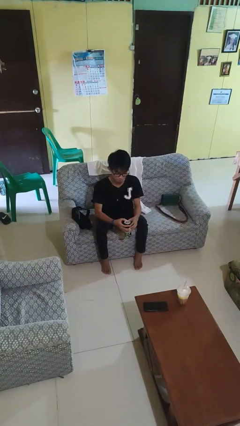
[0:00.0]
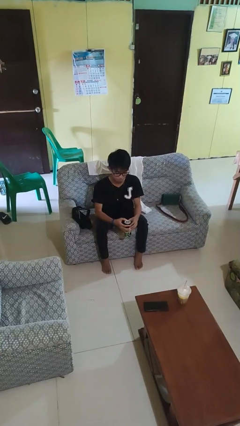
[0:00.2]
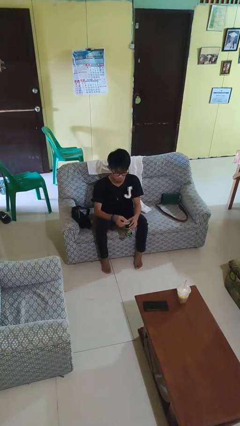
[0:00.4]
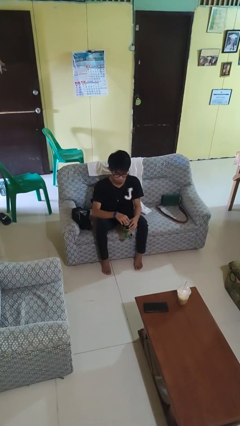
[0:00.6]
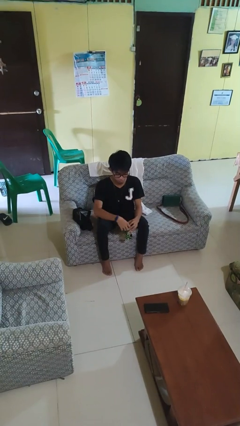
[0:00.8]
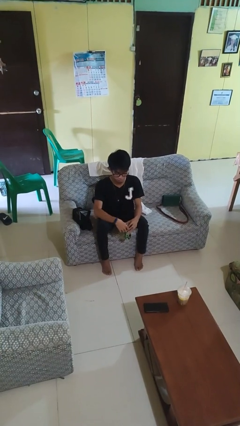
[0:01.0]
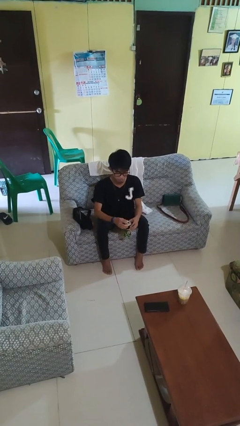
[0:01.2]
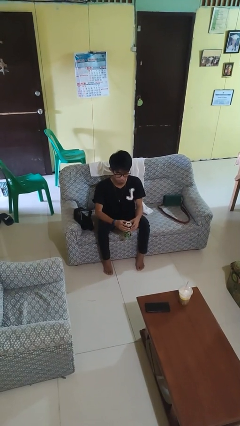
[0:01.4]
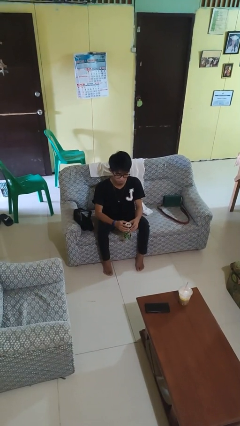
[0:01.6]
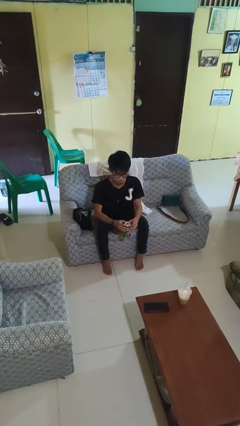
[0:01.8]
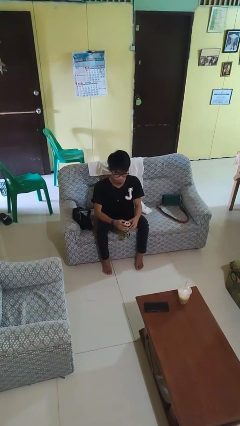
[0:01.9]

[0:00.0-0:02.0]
person opens beverage can

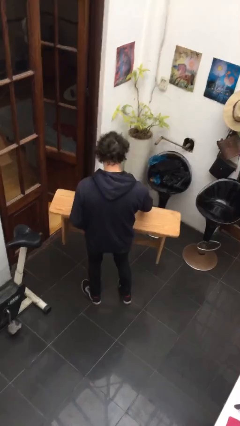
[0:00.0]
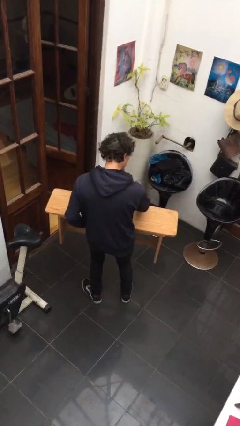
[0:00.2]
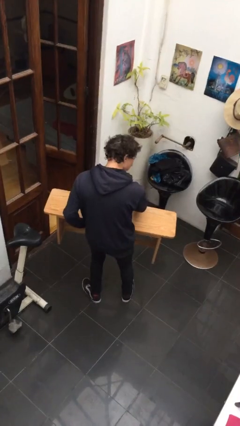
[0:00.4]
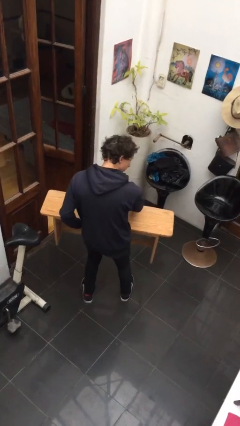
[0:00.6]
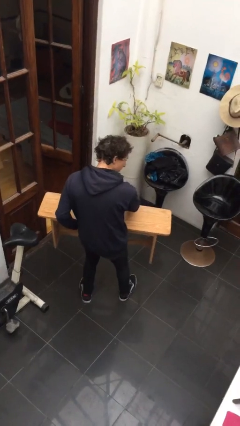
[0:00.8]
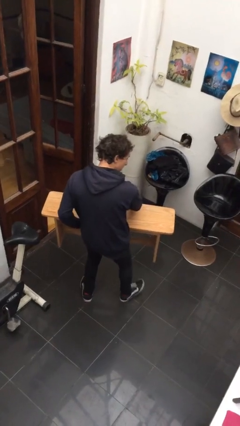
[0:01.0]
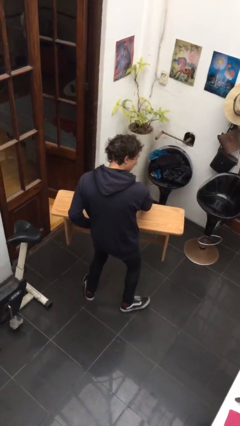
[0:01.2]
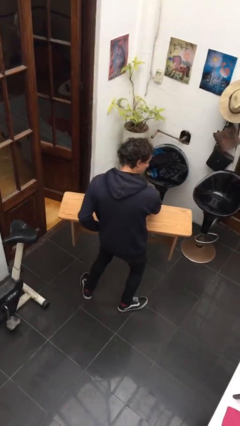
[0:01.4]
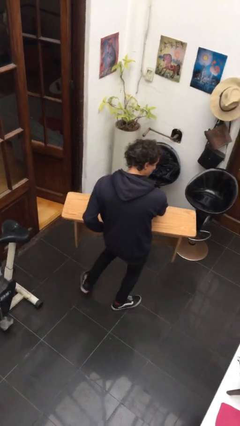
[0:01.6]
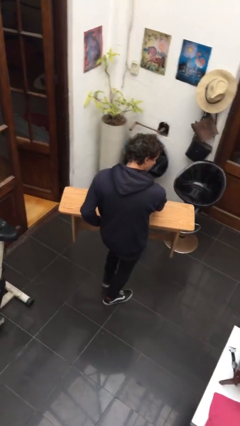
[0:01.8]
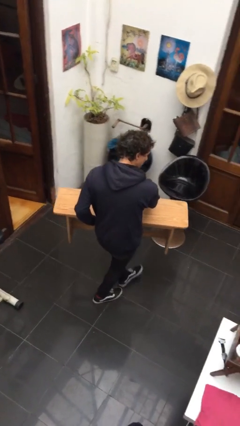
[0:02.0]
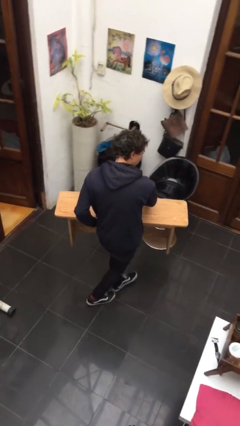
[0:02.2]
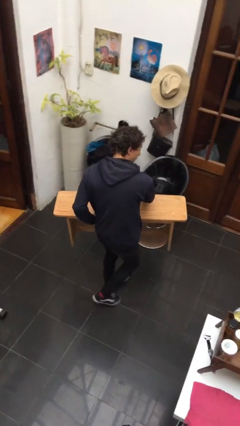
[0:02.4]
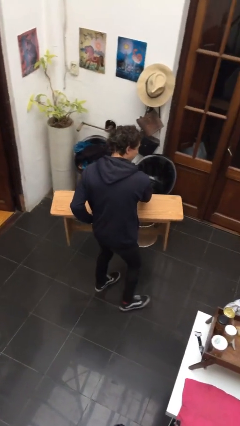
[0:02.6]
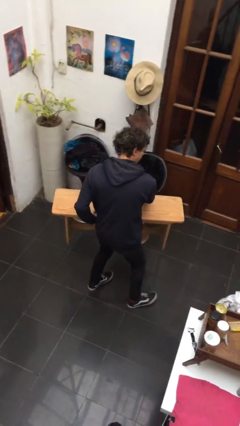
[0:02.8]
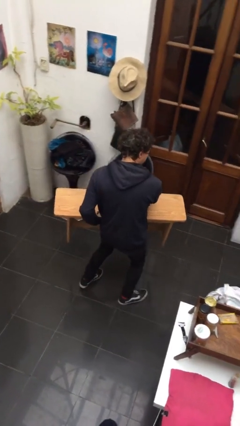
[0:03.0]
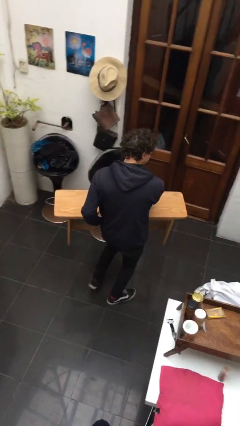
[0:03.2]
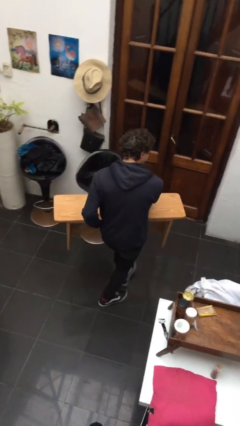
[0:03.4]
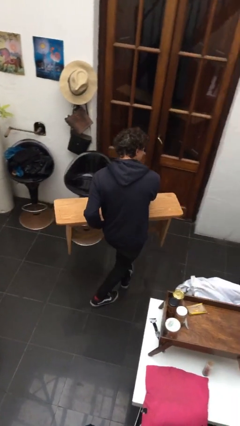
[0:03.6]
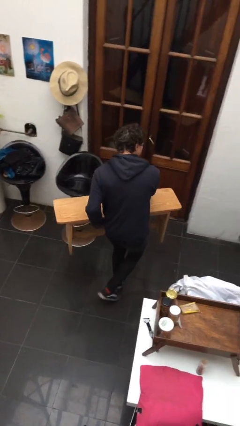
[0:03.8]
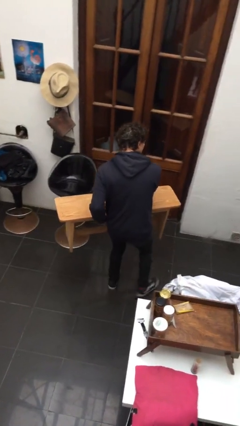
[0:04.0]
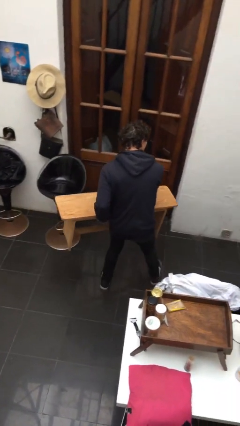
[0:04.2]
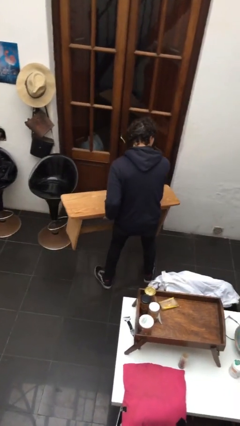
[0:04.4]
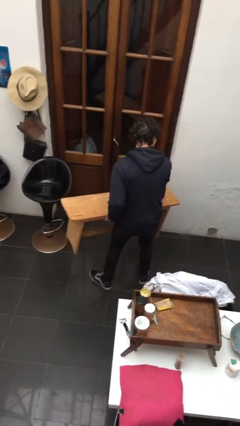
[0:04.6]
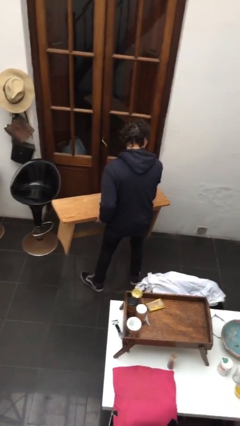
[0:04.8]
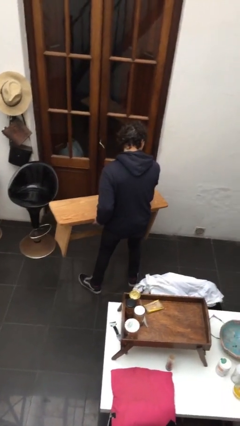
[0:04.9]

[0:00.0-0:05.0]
person carries furniture

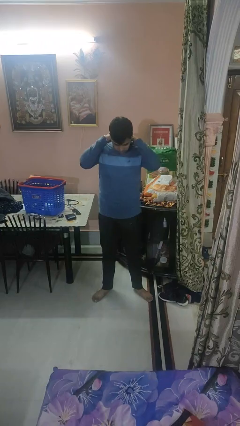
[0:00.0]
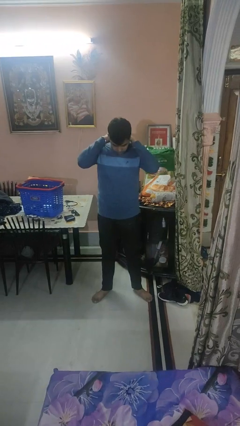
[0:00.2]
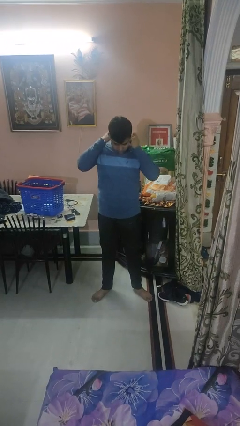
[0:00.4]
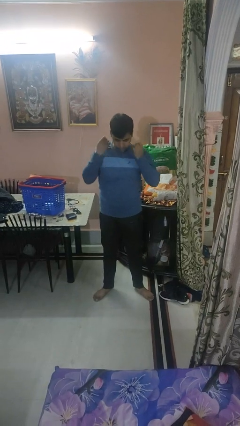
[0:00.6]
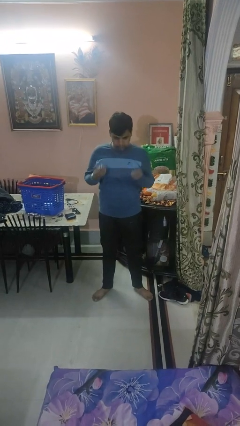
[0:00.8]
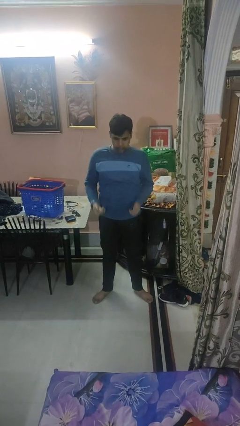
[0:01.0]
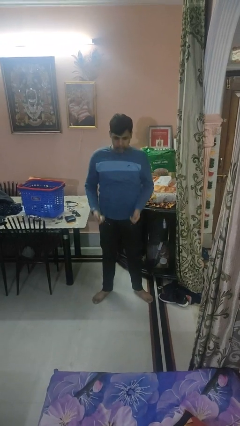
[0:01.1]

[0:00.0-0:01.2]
person takes off necklace

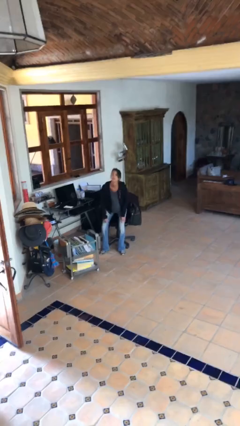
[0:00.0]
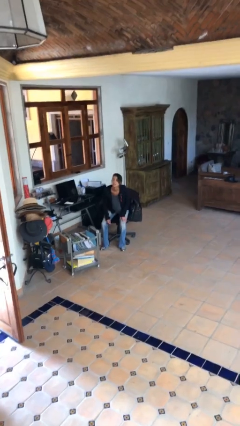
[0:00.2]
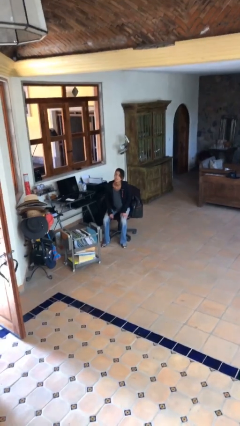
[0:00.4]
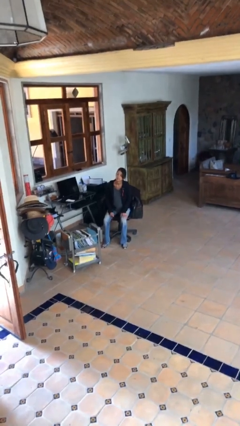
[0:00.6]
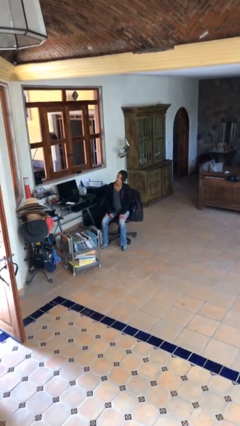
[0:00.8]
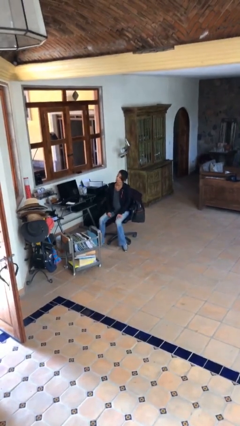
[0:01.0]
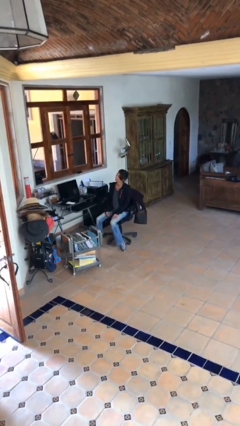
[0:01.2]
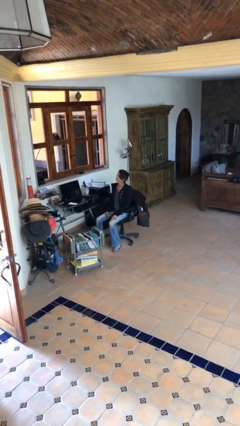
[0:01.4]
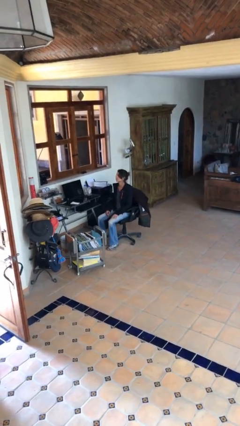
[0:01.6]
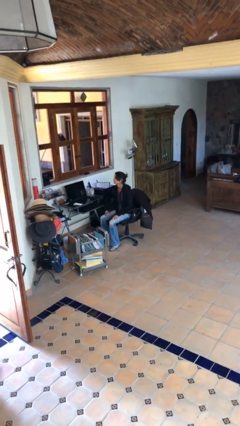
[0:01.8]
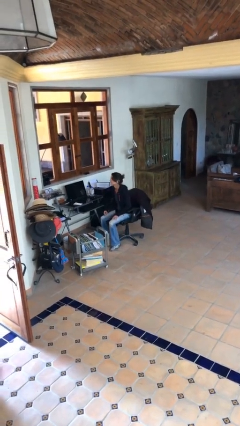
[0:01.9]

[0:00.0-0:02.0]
person sits down

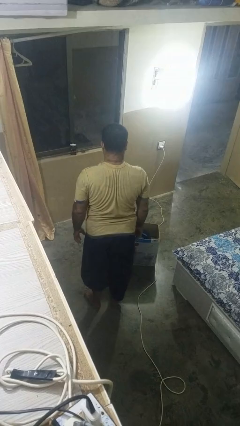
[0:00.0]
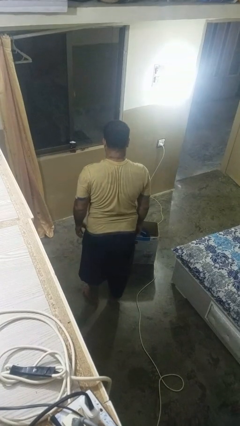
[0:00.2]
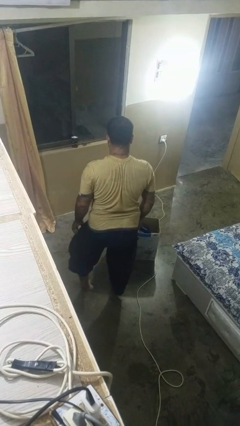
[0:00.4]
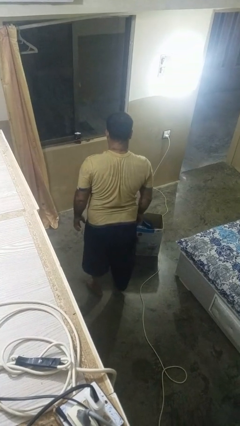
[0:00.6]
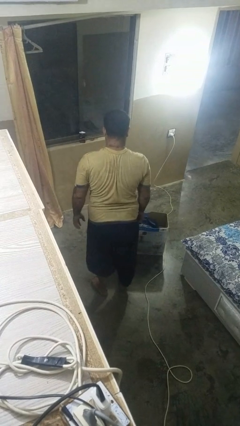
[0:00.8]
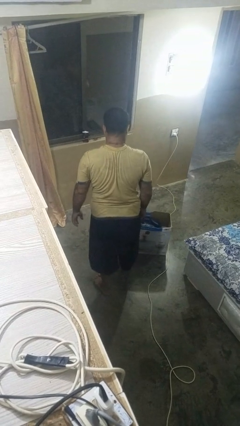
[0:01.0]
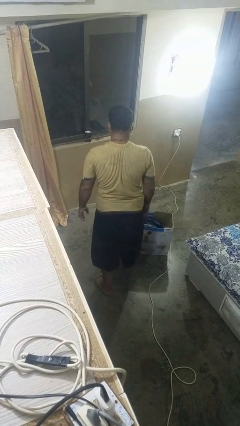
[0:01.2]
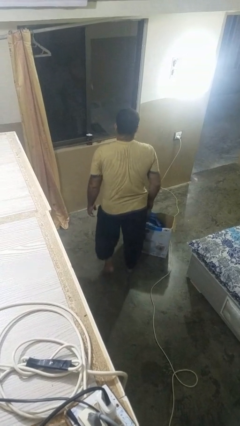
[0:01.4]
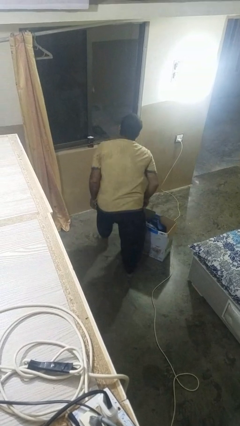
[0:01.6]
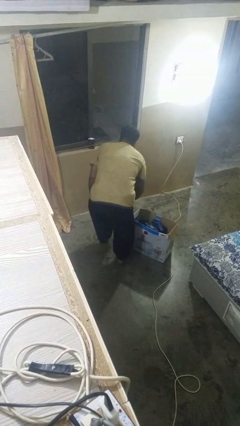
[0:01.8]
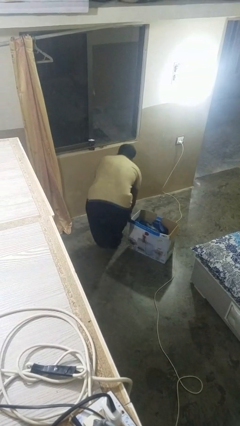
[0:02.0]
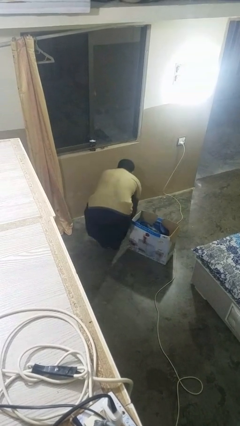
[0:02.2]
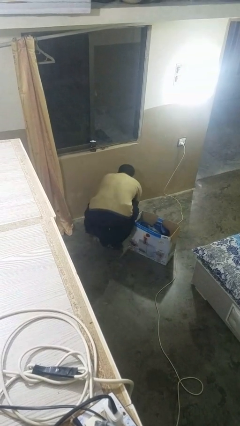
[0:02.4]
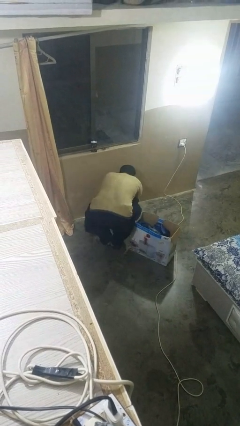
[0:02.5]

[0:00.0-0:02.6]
person trips on object on floor

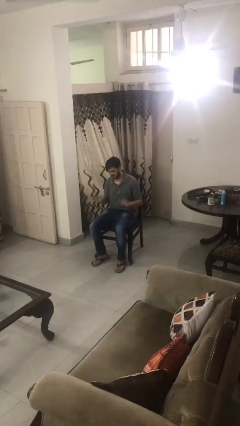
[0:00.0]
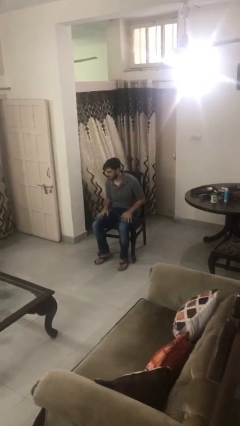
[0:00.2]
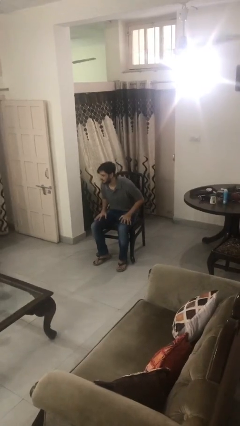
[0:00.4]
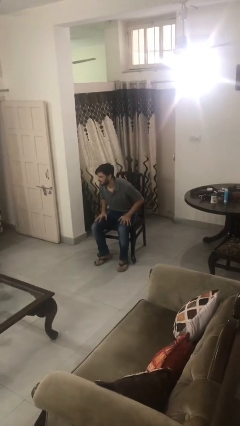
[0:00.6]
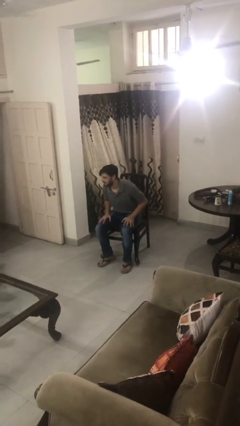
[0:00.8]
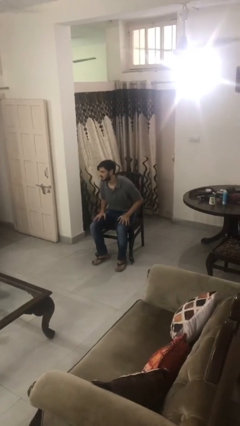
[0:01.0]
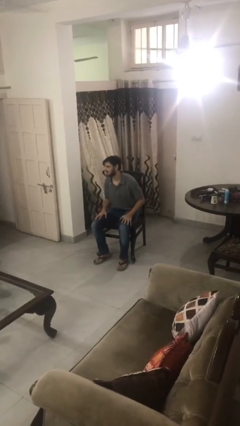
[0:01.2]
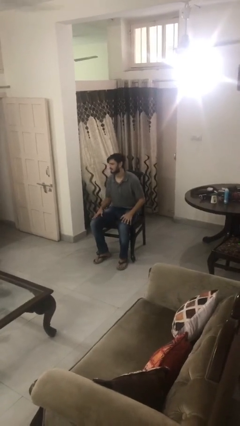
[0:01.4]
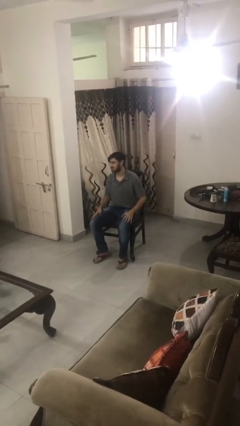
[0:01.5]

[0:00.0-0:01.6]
person slaps hands on thighs

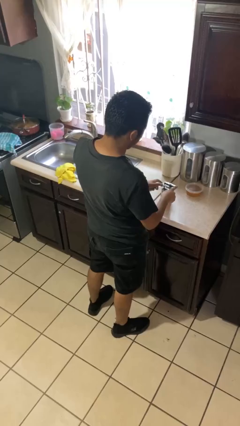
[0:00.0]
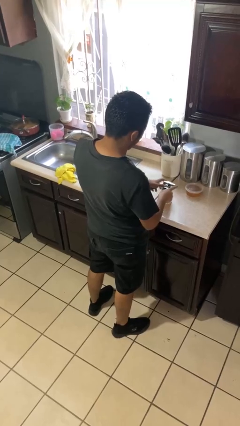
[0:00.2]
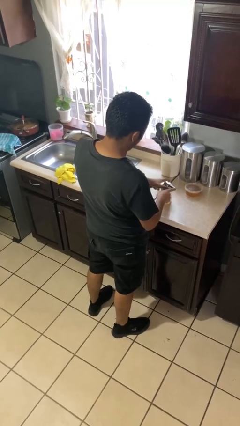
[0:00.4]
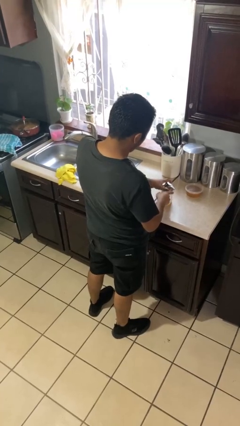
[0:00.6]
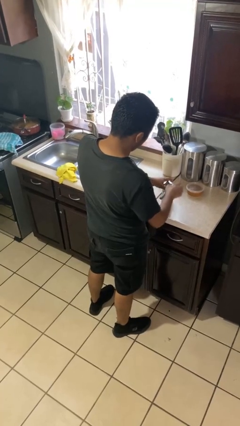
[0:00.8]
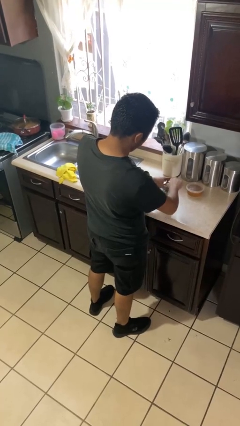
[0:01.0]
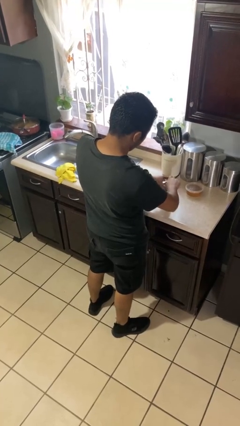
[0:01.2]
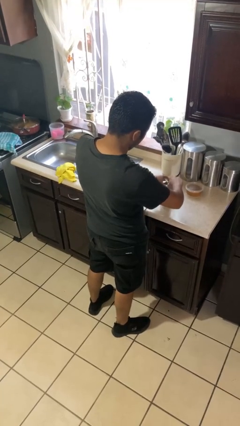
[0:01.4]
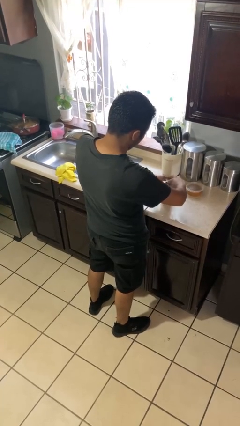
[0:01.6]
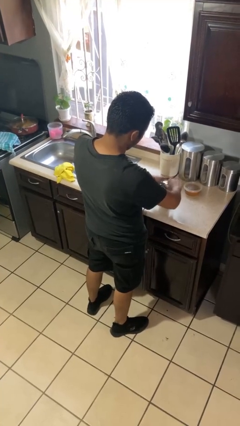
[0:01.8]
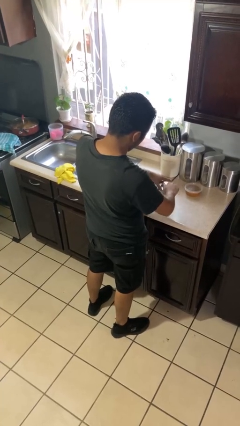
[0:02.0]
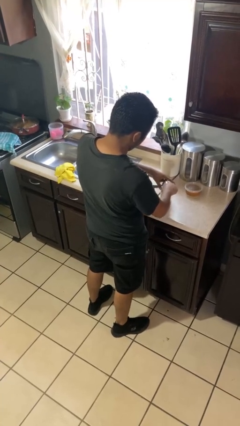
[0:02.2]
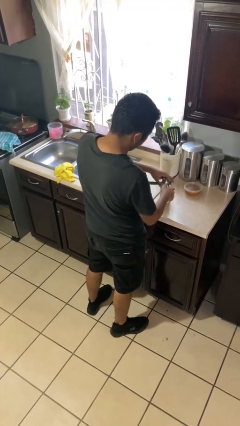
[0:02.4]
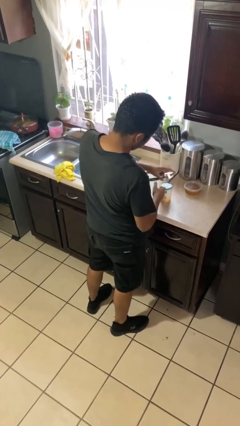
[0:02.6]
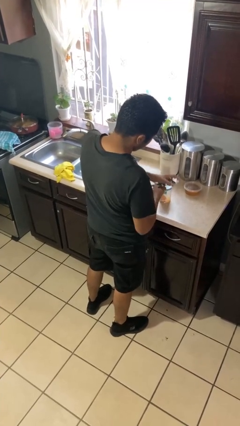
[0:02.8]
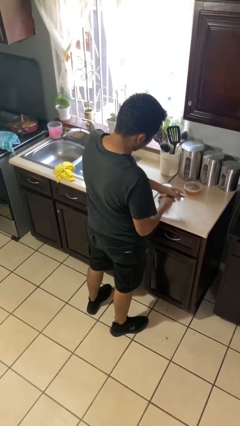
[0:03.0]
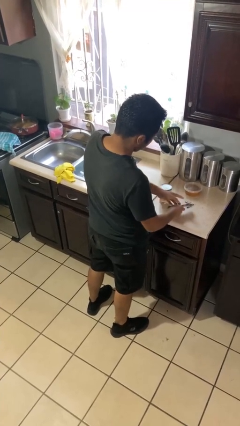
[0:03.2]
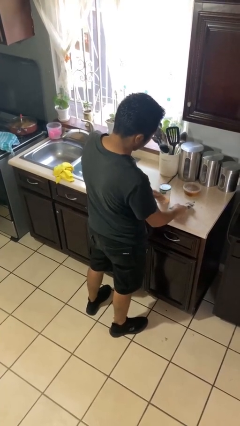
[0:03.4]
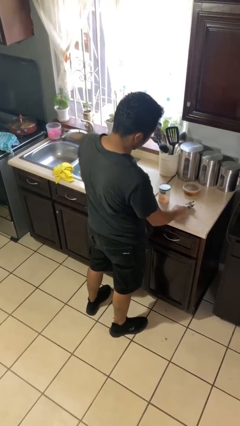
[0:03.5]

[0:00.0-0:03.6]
person opens can with can opener
